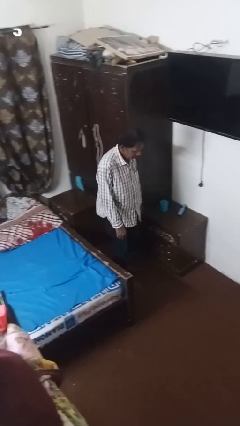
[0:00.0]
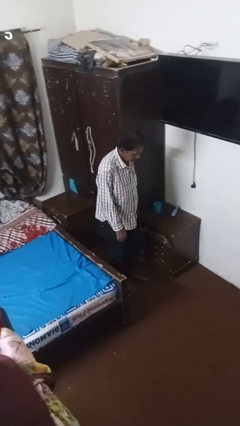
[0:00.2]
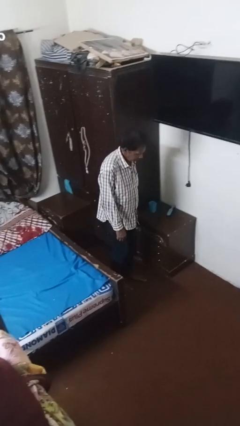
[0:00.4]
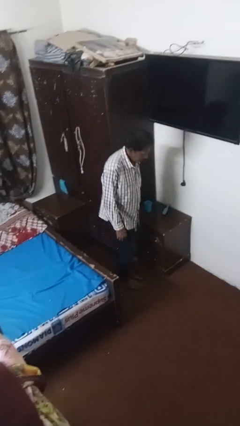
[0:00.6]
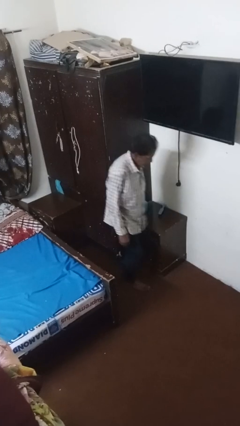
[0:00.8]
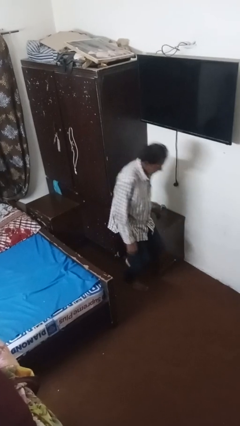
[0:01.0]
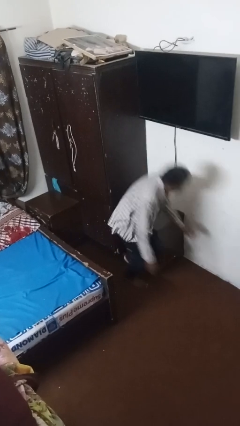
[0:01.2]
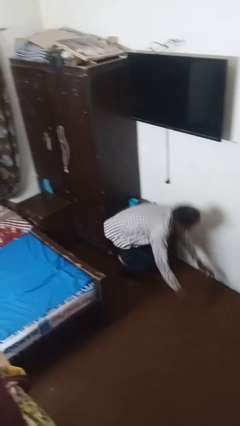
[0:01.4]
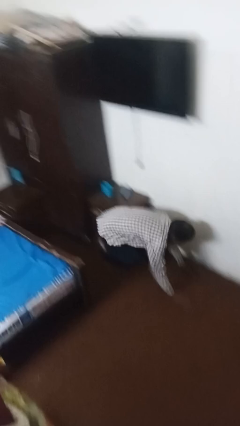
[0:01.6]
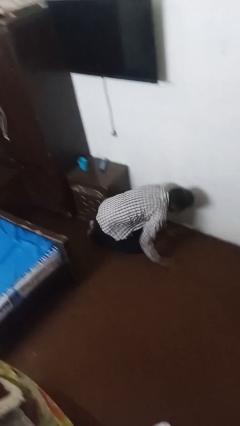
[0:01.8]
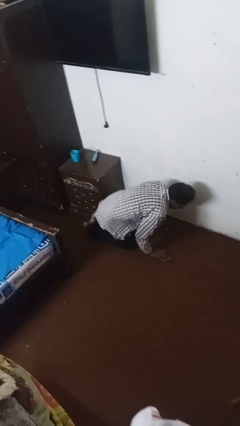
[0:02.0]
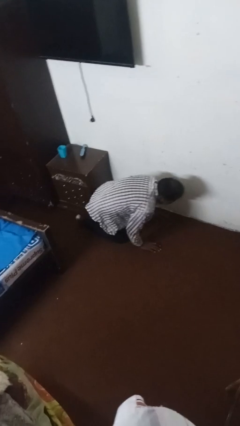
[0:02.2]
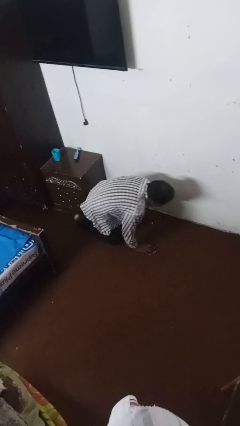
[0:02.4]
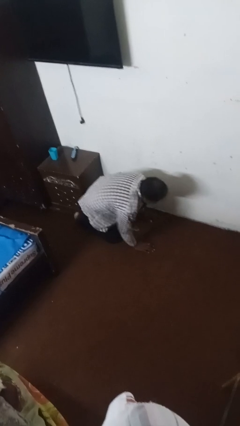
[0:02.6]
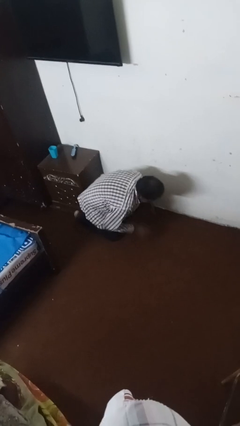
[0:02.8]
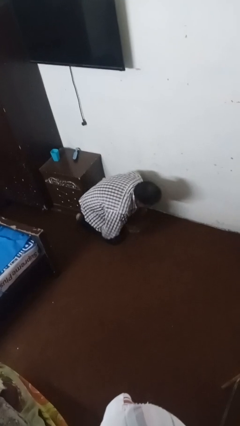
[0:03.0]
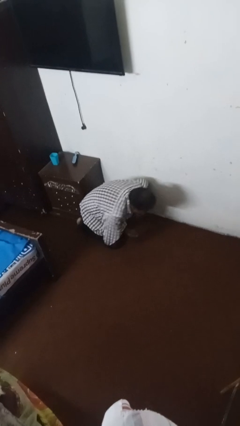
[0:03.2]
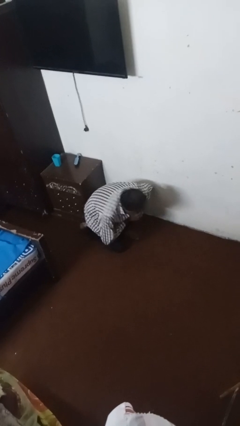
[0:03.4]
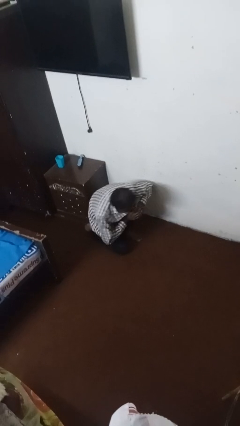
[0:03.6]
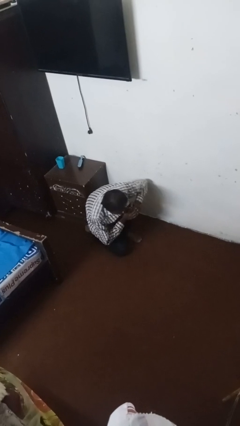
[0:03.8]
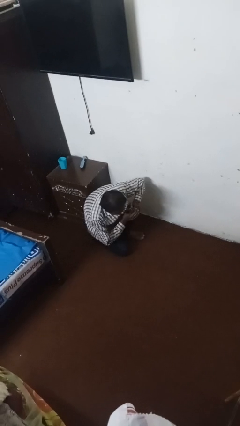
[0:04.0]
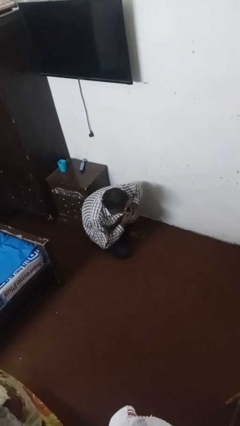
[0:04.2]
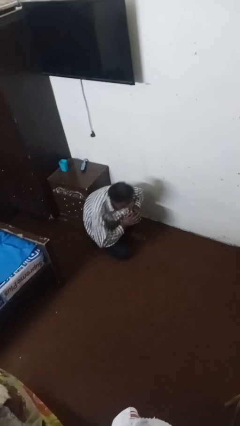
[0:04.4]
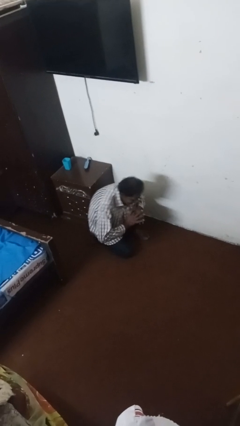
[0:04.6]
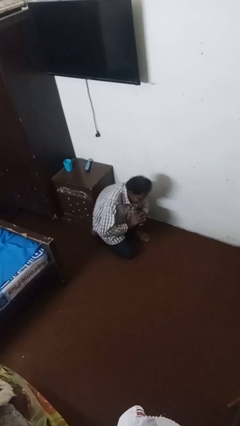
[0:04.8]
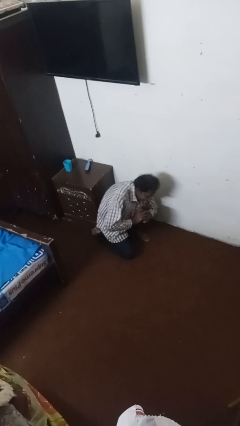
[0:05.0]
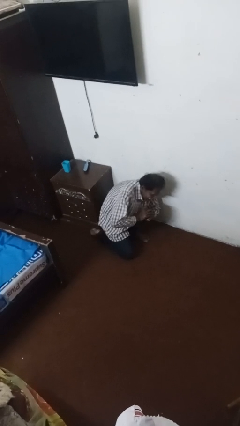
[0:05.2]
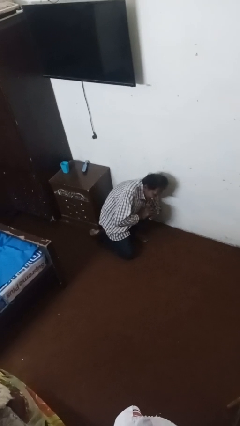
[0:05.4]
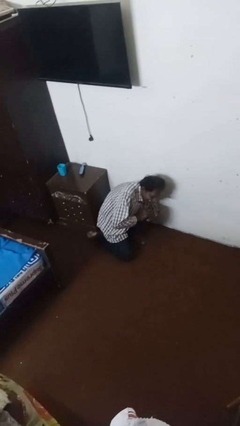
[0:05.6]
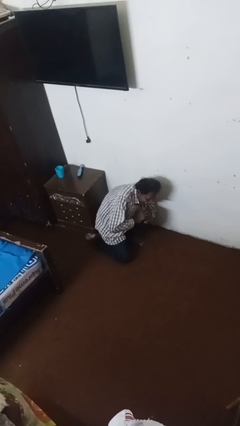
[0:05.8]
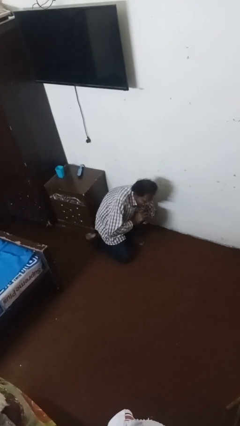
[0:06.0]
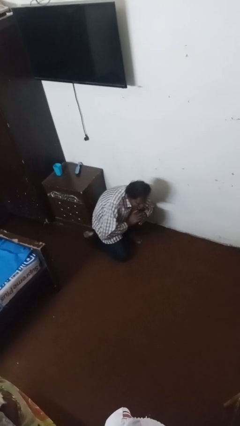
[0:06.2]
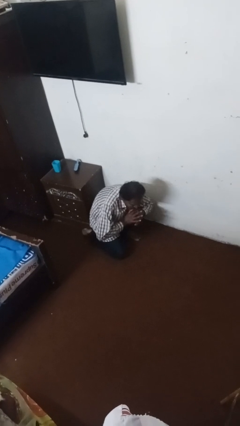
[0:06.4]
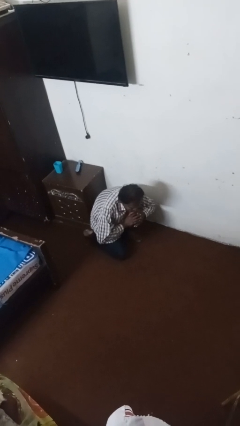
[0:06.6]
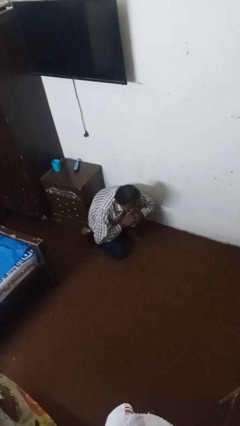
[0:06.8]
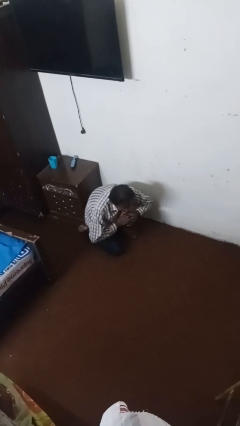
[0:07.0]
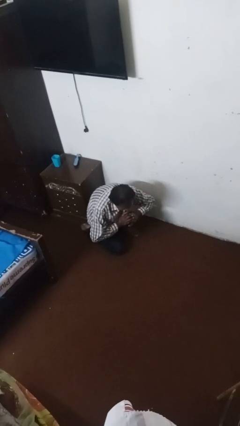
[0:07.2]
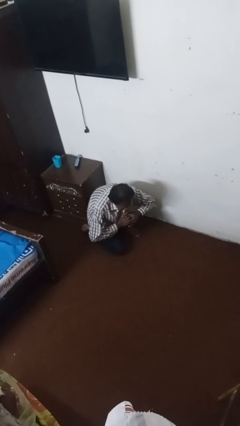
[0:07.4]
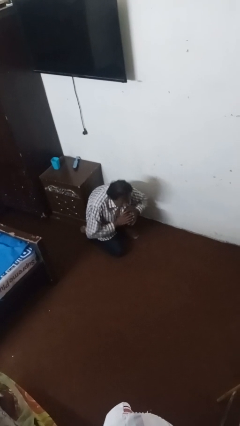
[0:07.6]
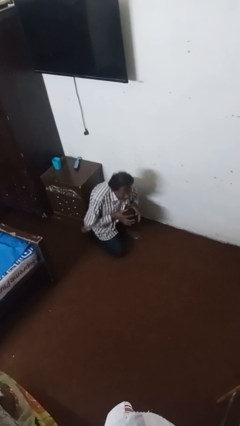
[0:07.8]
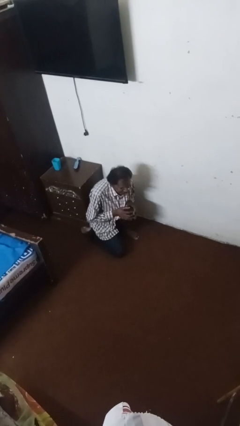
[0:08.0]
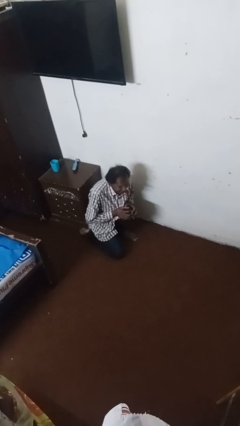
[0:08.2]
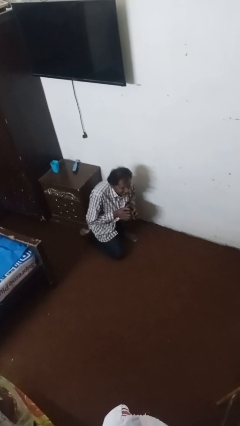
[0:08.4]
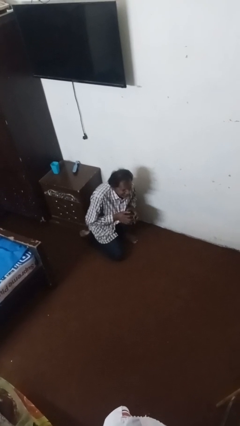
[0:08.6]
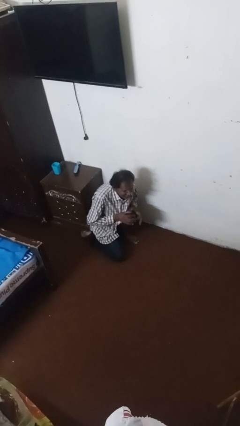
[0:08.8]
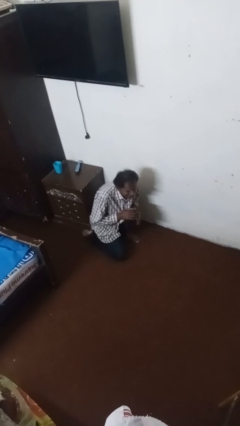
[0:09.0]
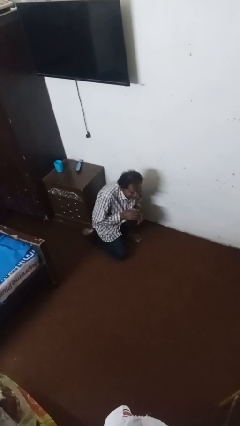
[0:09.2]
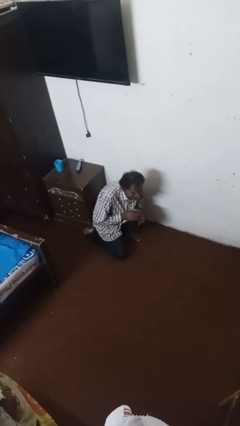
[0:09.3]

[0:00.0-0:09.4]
person trips on object on floor

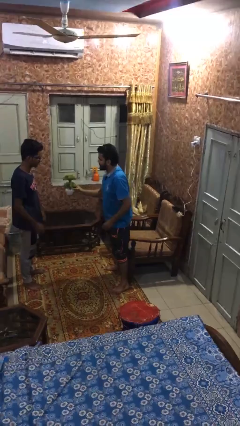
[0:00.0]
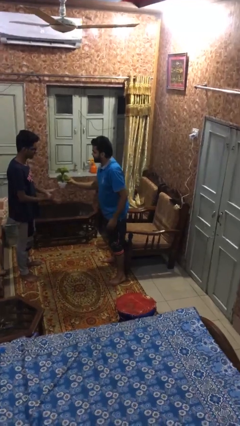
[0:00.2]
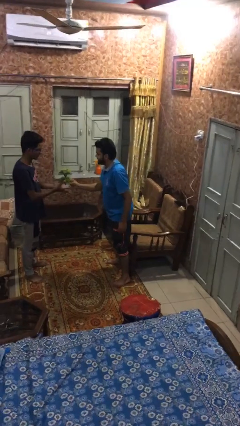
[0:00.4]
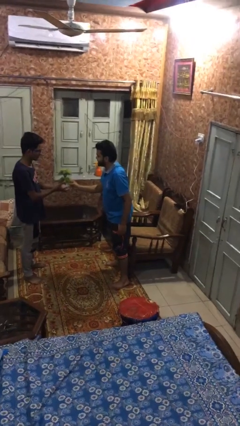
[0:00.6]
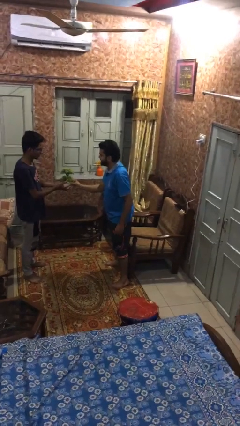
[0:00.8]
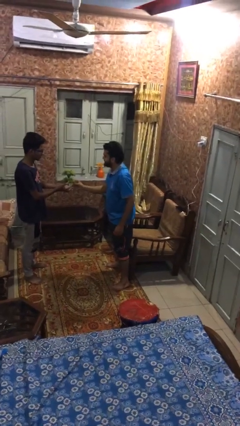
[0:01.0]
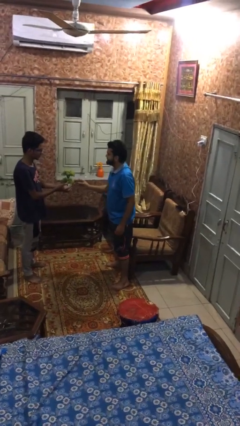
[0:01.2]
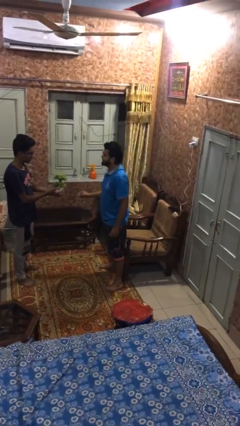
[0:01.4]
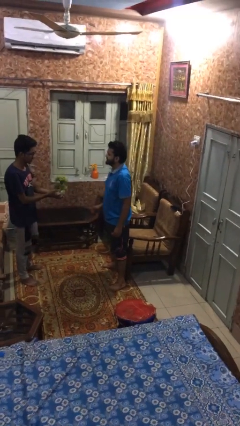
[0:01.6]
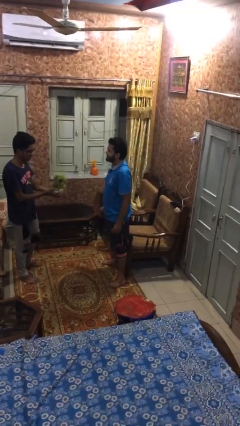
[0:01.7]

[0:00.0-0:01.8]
person transfers object to person

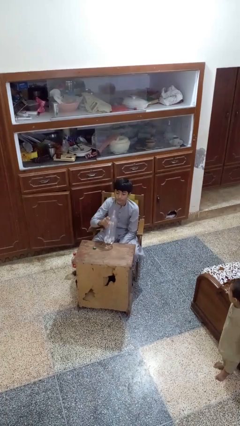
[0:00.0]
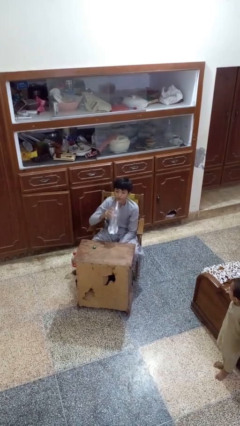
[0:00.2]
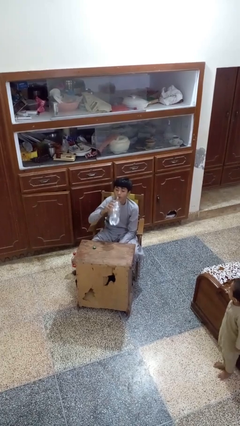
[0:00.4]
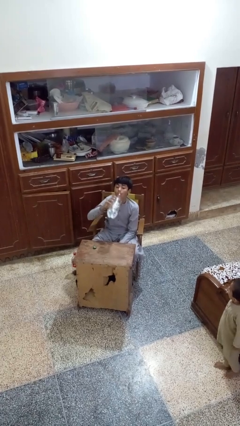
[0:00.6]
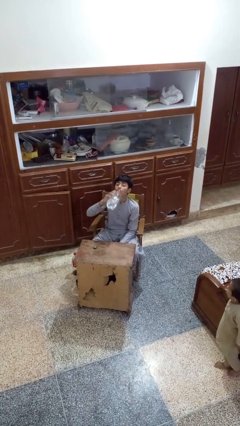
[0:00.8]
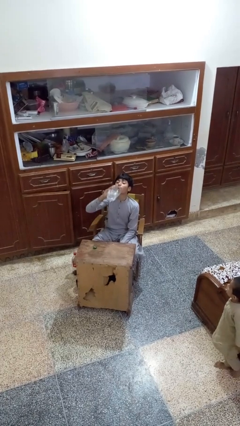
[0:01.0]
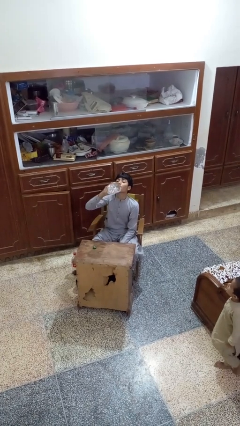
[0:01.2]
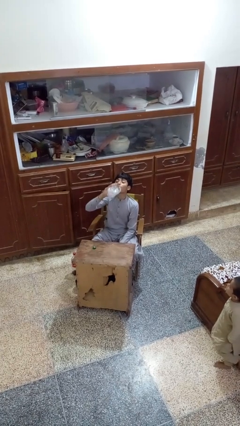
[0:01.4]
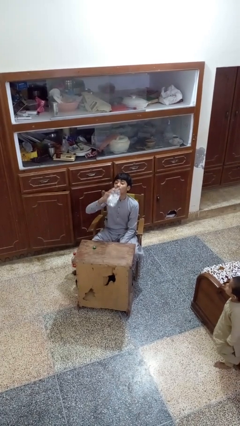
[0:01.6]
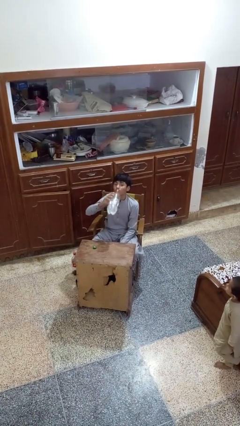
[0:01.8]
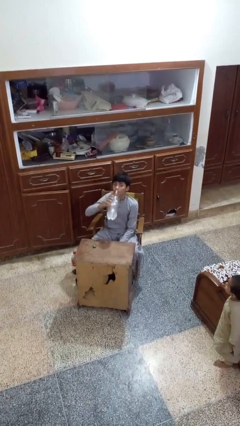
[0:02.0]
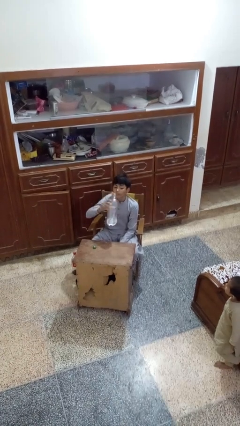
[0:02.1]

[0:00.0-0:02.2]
person drinks from bottle

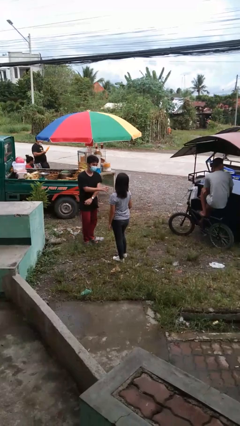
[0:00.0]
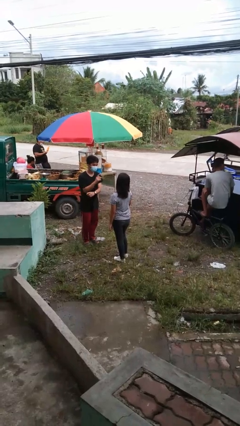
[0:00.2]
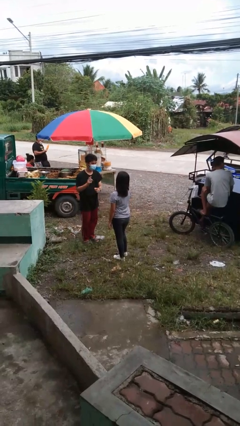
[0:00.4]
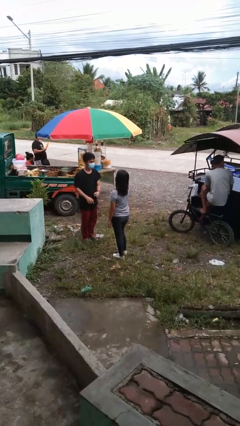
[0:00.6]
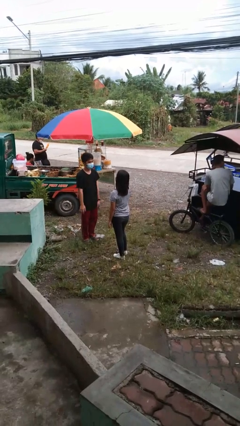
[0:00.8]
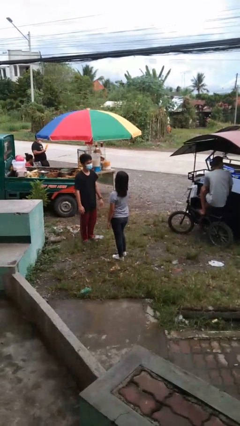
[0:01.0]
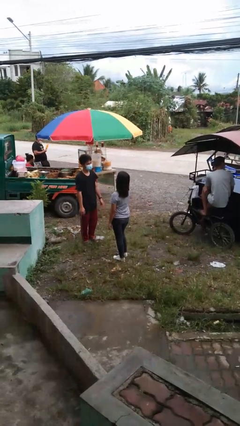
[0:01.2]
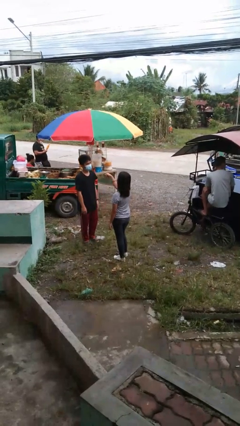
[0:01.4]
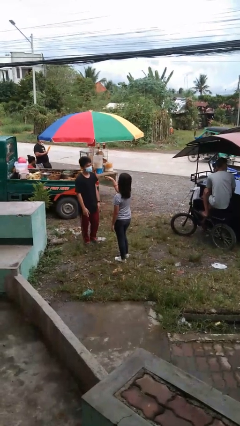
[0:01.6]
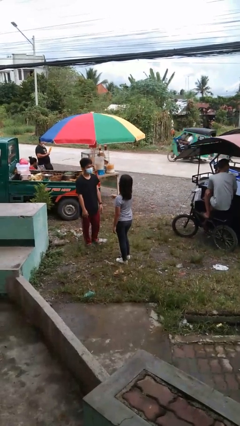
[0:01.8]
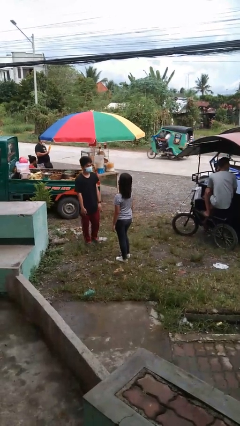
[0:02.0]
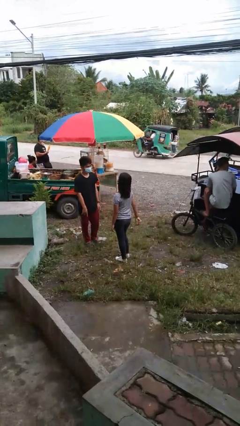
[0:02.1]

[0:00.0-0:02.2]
person talks to person

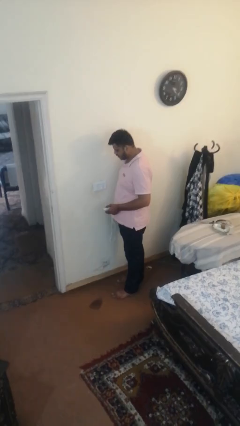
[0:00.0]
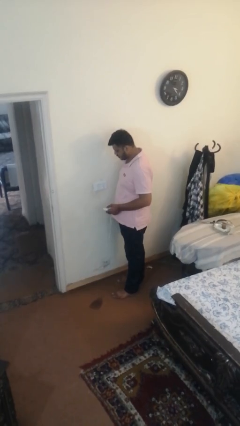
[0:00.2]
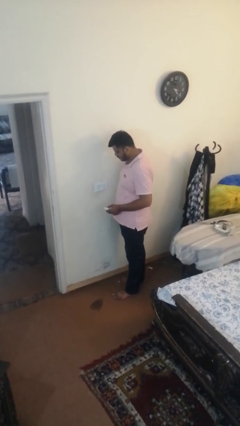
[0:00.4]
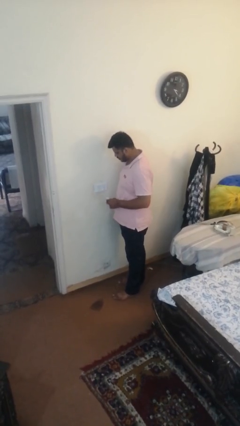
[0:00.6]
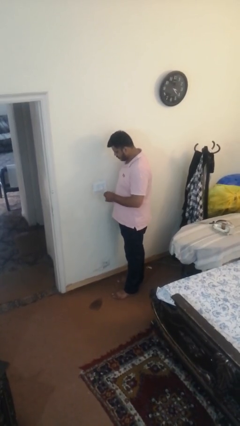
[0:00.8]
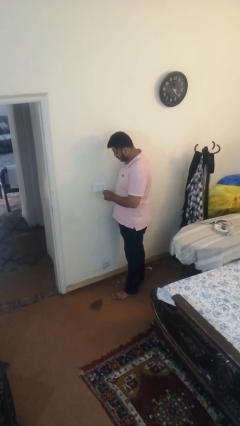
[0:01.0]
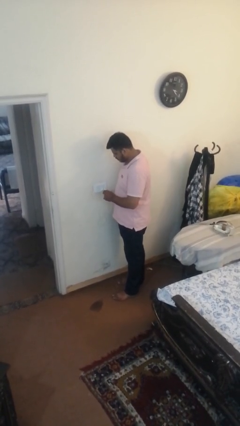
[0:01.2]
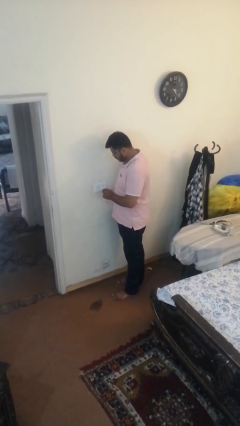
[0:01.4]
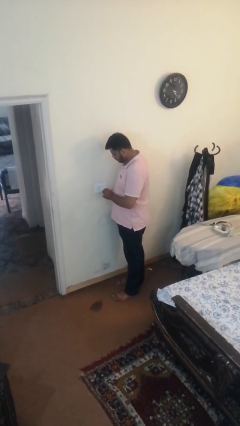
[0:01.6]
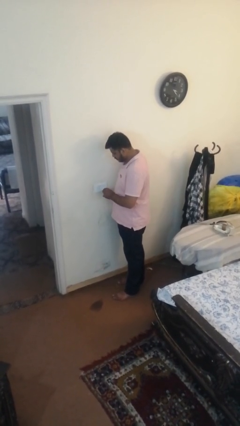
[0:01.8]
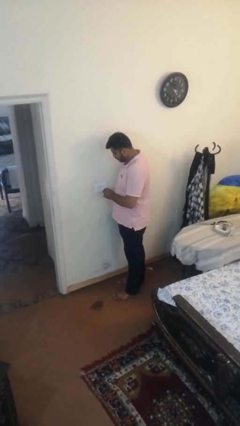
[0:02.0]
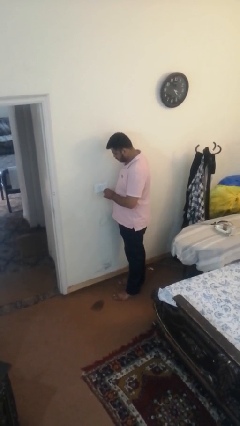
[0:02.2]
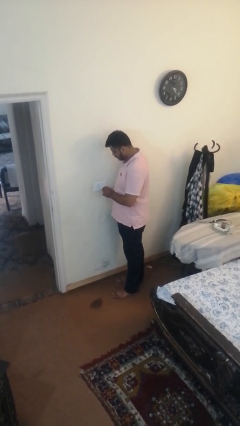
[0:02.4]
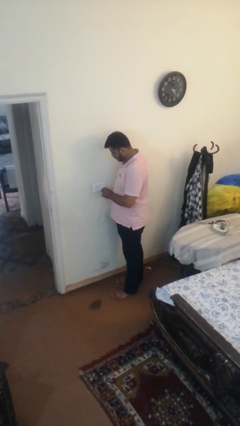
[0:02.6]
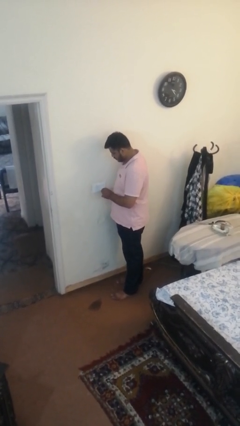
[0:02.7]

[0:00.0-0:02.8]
person plugs into electrical socket
